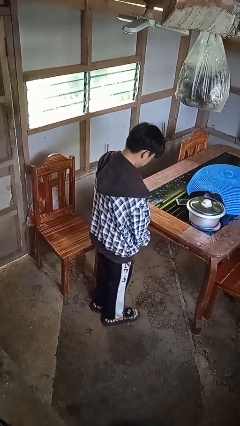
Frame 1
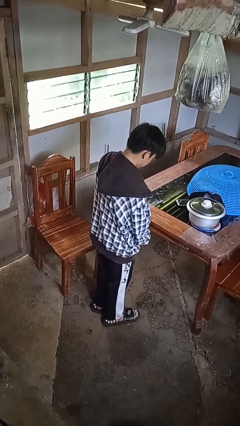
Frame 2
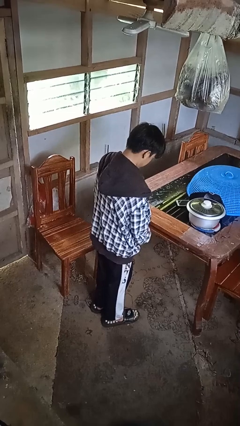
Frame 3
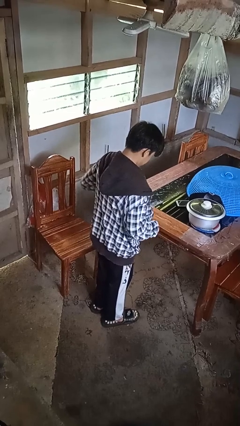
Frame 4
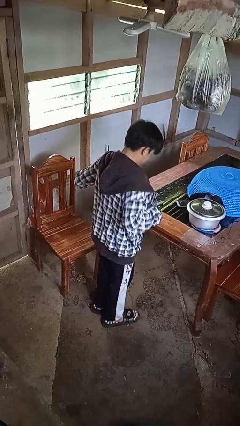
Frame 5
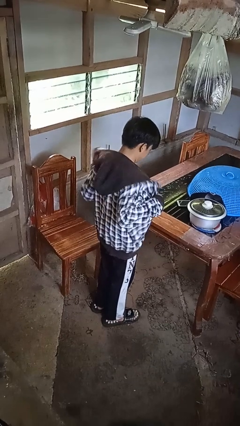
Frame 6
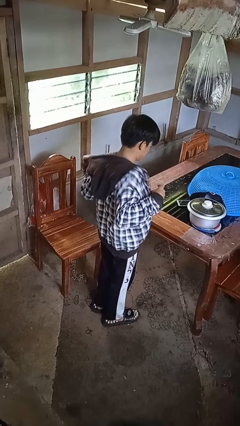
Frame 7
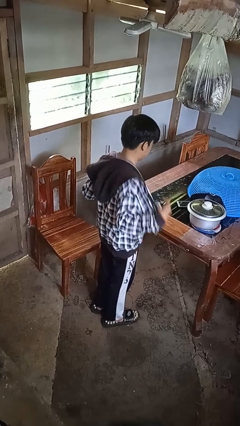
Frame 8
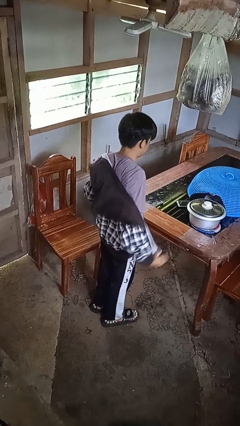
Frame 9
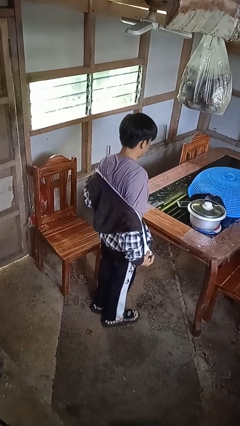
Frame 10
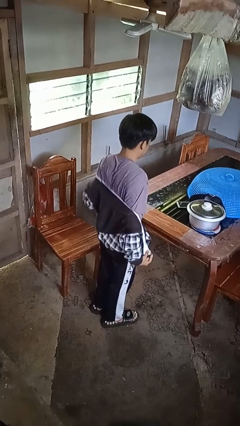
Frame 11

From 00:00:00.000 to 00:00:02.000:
person takes off jacket

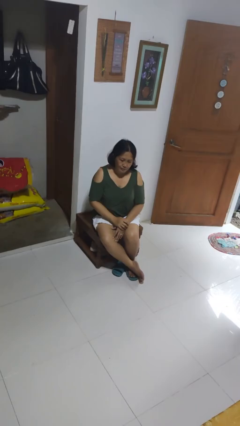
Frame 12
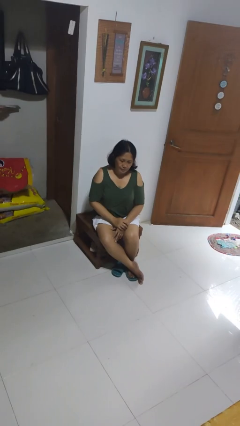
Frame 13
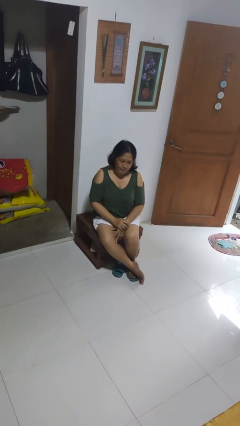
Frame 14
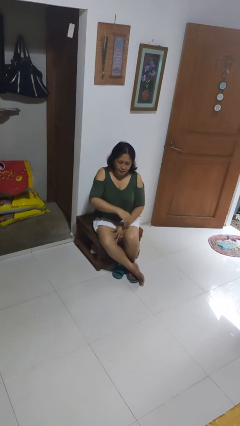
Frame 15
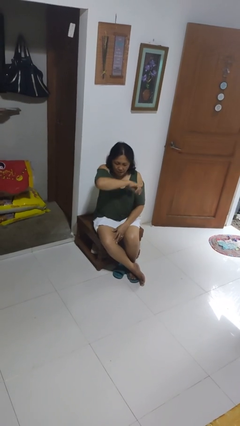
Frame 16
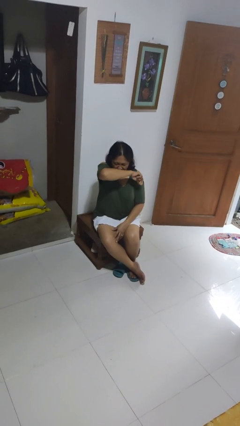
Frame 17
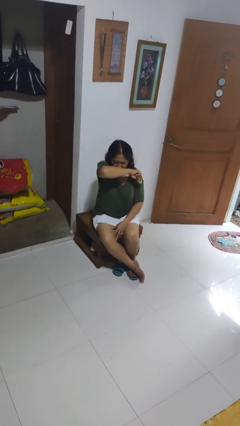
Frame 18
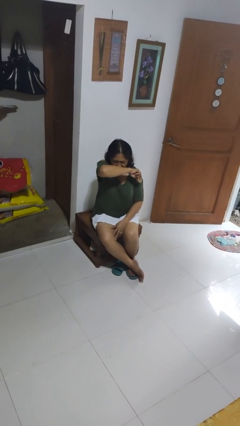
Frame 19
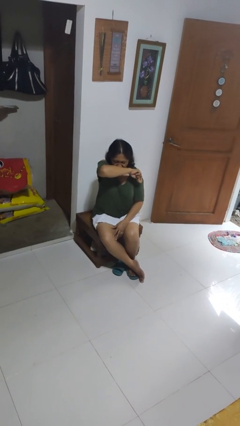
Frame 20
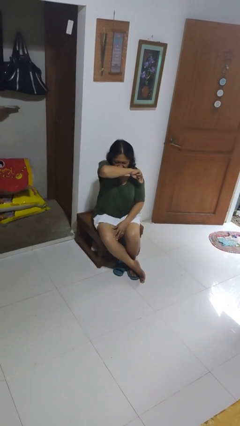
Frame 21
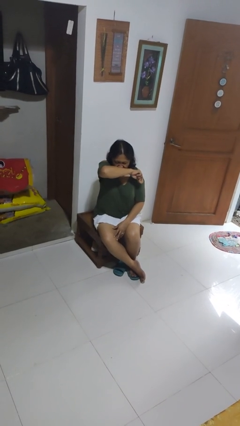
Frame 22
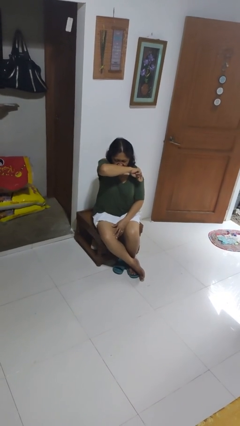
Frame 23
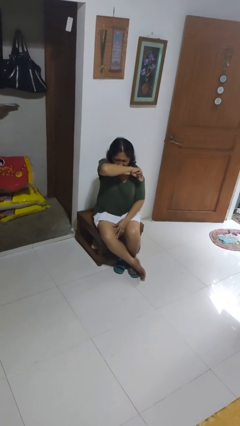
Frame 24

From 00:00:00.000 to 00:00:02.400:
person sneezes into arm

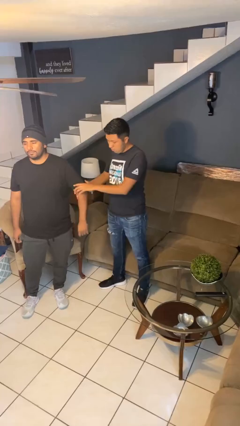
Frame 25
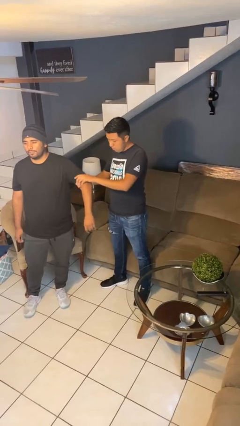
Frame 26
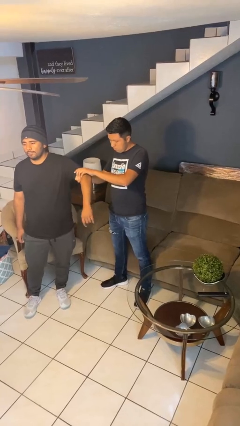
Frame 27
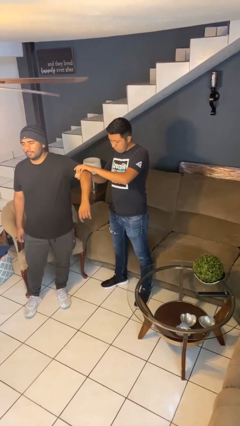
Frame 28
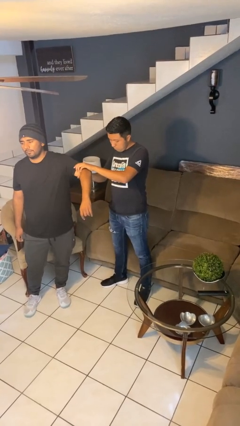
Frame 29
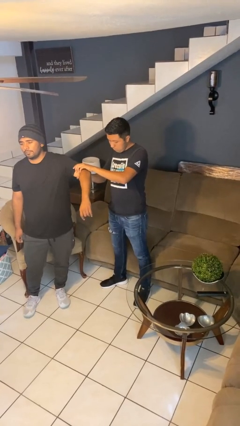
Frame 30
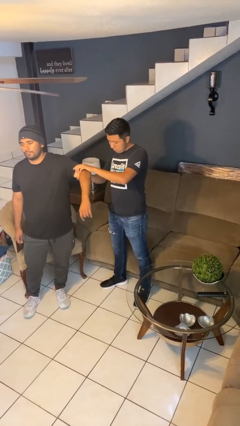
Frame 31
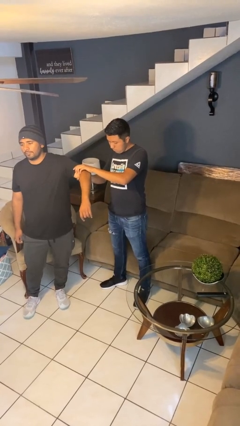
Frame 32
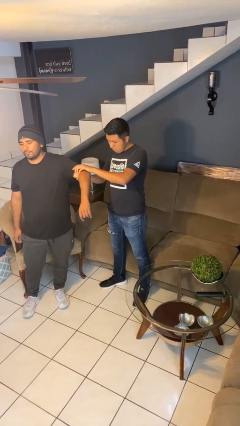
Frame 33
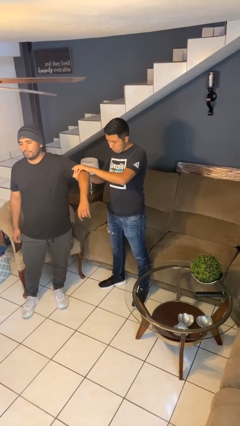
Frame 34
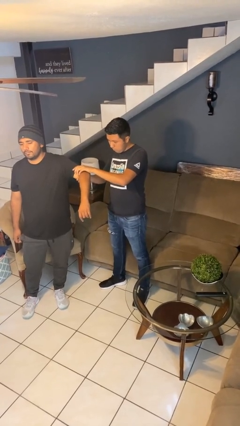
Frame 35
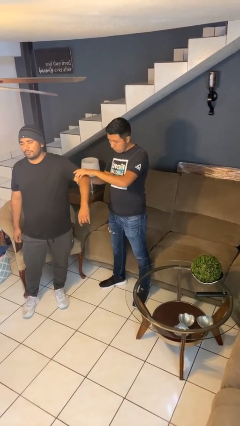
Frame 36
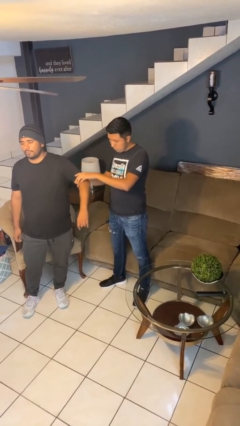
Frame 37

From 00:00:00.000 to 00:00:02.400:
person grabs person by bicep

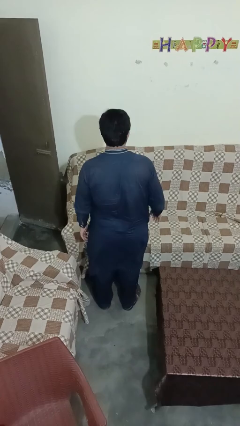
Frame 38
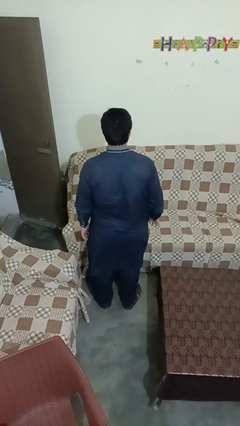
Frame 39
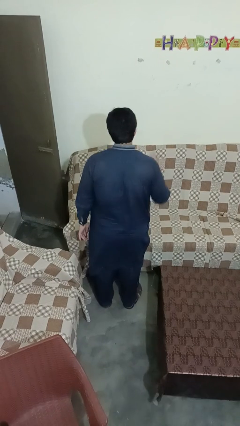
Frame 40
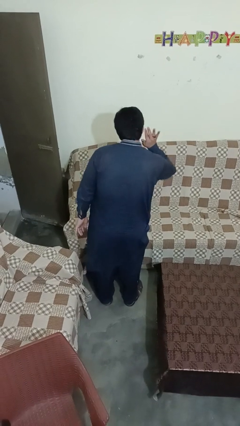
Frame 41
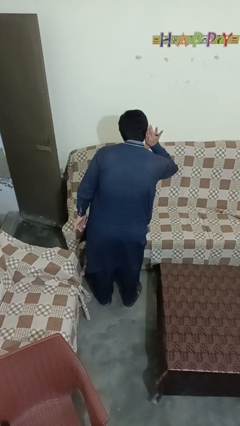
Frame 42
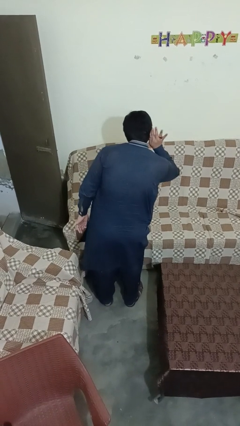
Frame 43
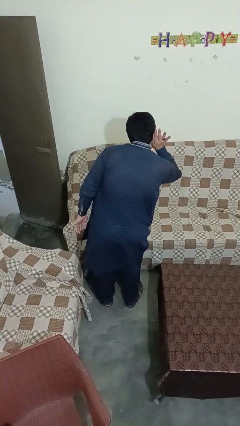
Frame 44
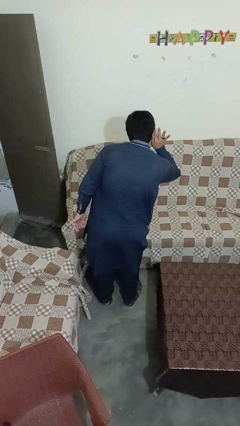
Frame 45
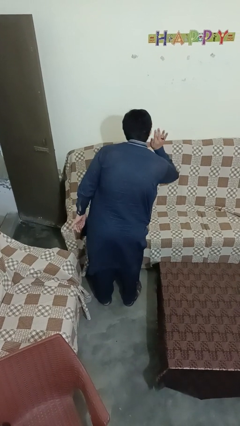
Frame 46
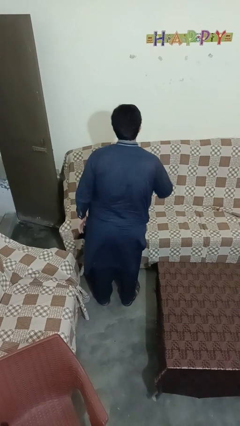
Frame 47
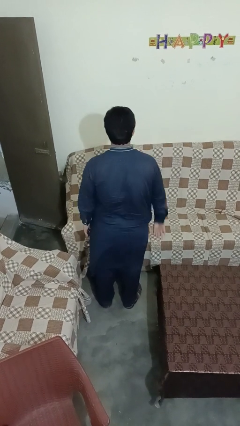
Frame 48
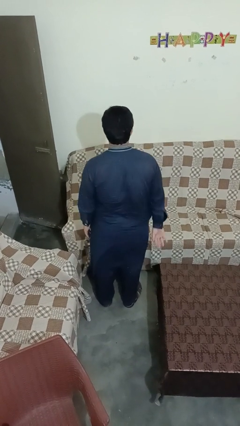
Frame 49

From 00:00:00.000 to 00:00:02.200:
person gestures listen closely

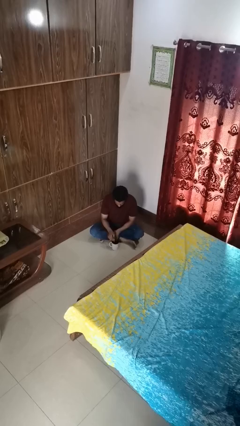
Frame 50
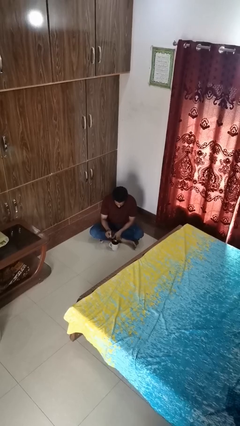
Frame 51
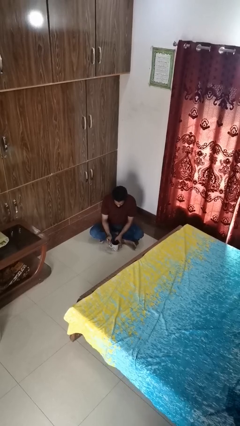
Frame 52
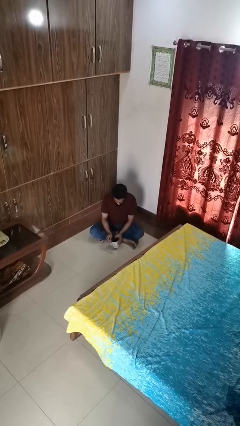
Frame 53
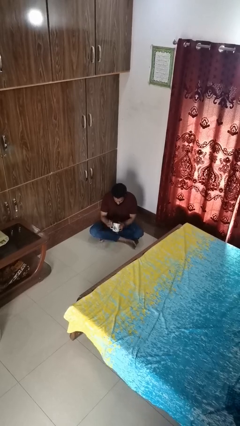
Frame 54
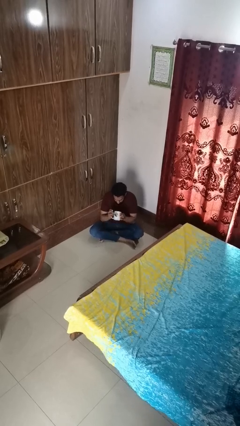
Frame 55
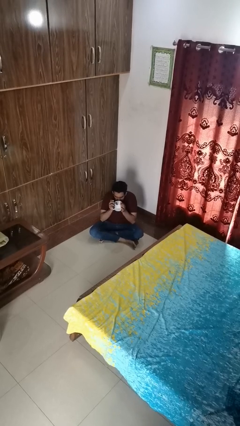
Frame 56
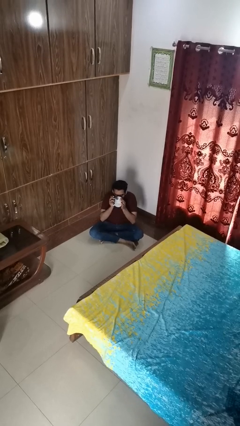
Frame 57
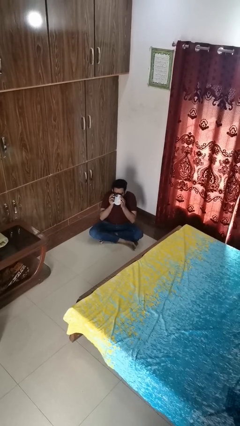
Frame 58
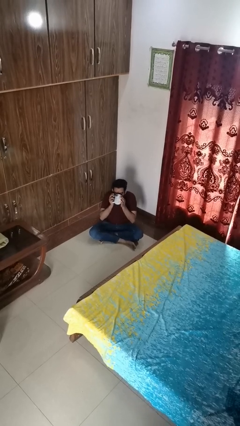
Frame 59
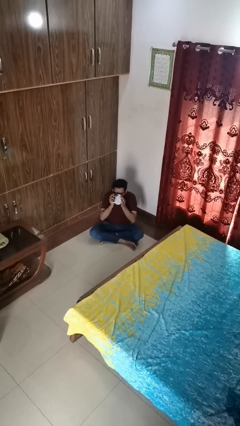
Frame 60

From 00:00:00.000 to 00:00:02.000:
person drinks from mug

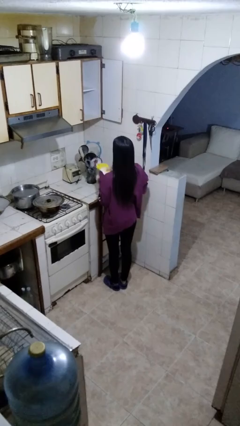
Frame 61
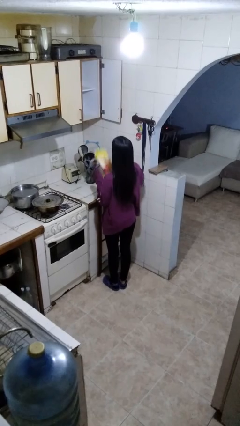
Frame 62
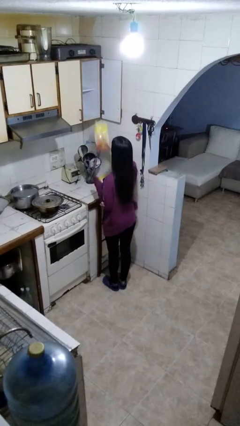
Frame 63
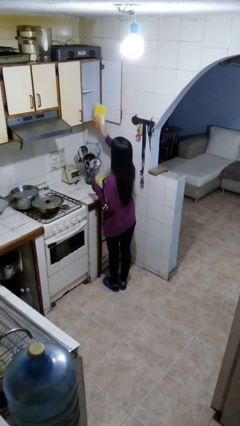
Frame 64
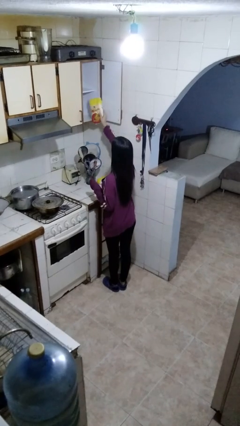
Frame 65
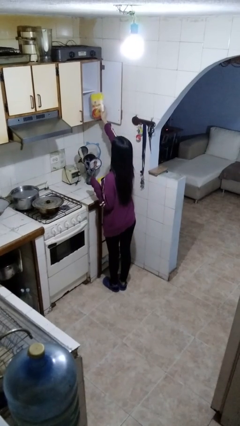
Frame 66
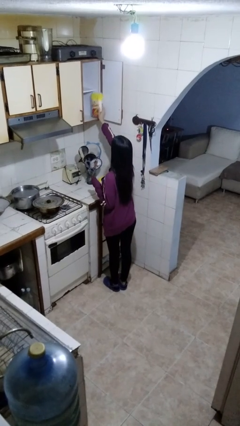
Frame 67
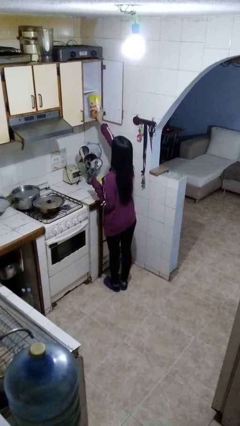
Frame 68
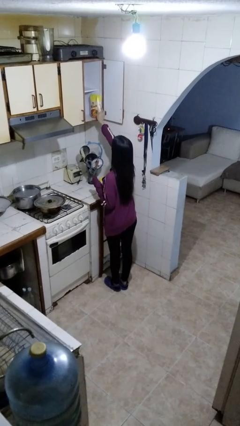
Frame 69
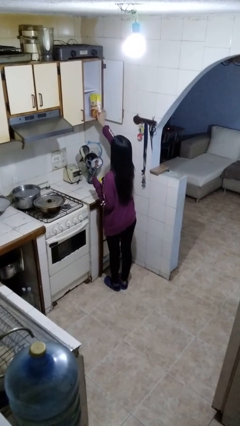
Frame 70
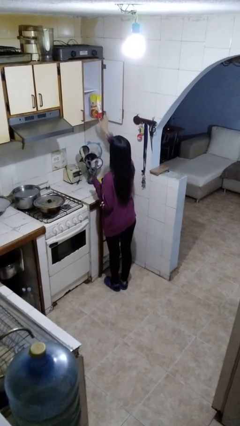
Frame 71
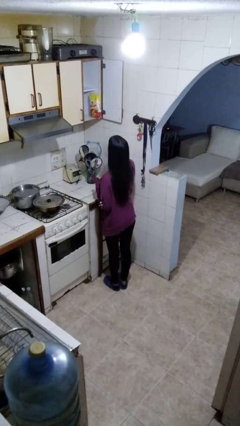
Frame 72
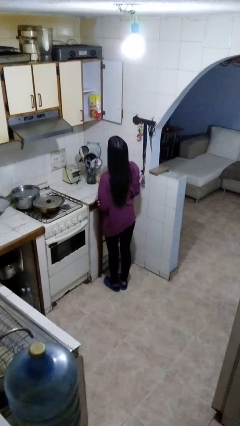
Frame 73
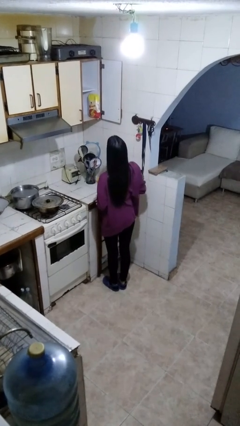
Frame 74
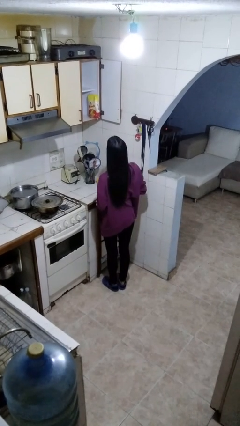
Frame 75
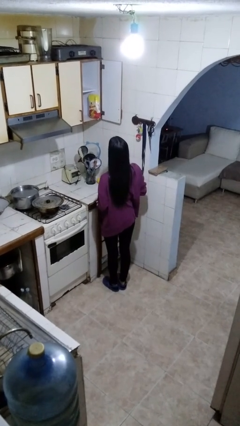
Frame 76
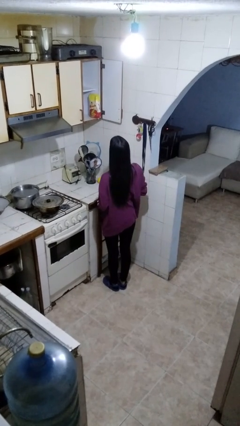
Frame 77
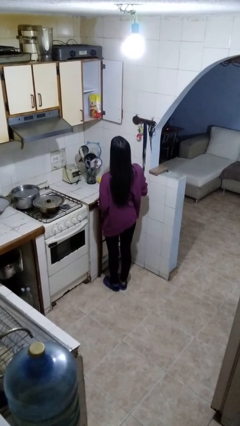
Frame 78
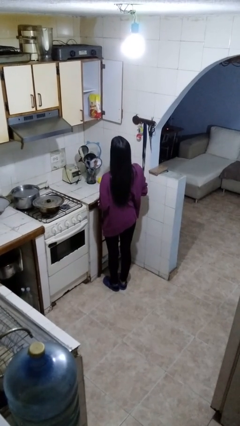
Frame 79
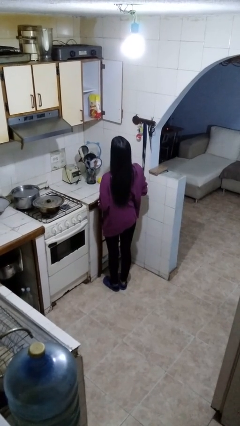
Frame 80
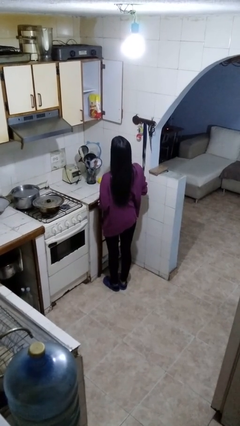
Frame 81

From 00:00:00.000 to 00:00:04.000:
person picks up object from cabinet

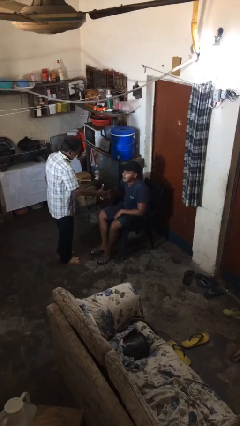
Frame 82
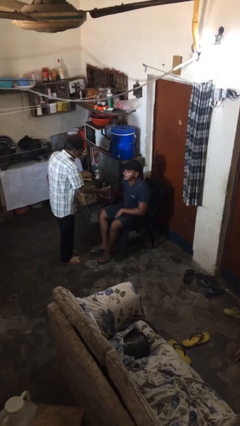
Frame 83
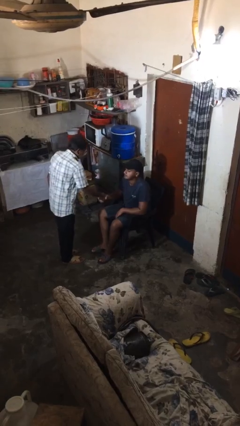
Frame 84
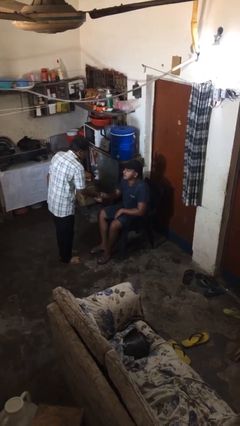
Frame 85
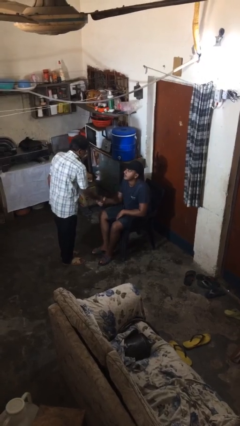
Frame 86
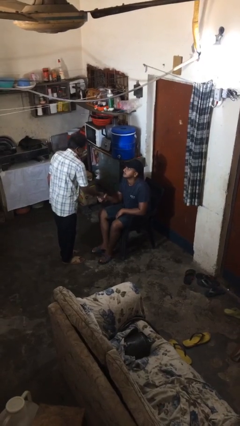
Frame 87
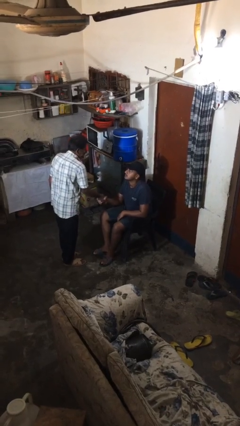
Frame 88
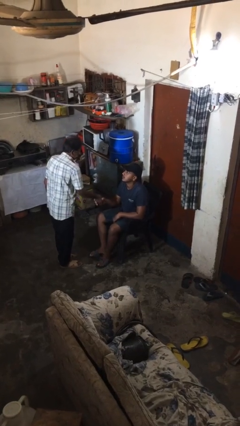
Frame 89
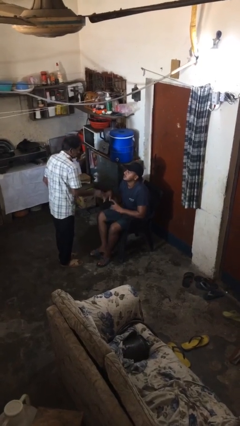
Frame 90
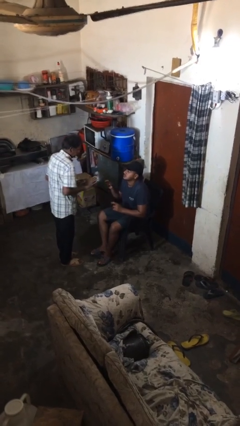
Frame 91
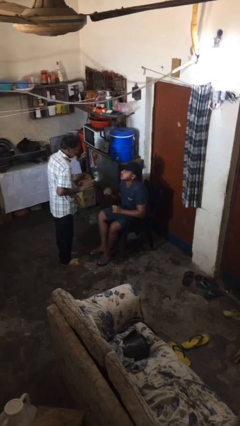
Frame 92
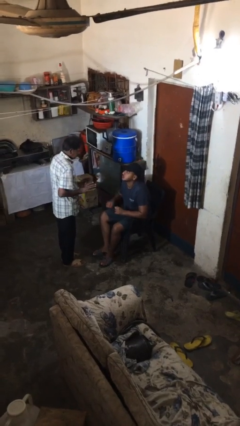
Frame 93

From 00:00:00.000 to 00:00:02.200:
person shakes hand
